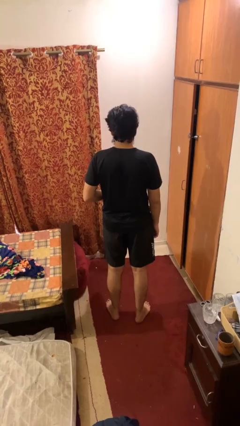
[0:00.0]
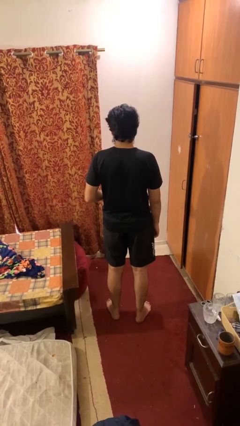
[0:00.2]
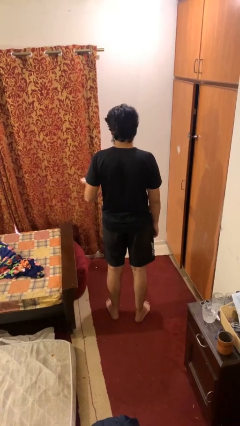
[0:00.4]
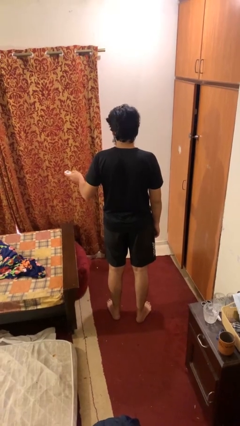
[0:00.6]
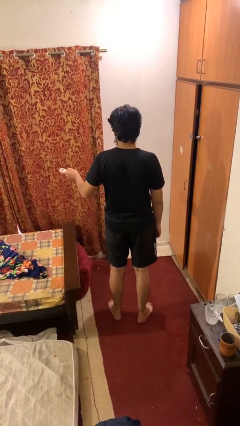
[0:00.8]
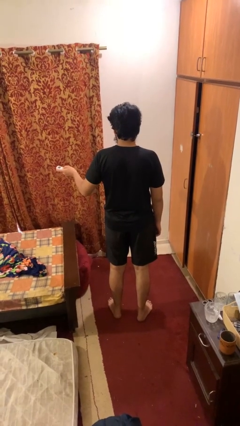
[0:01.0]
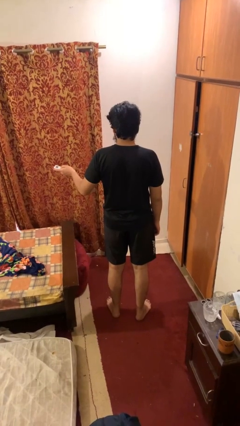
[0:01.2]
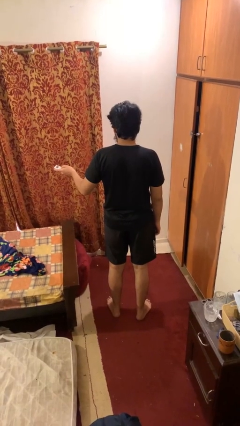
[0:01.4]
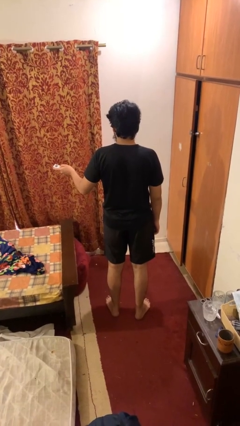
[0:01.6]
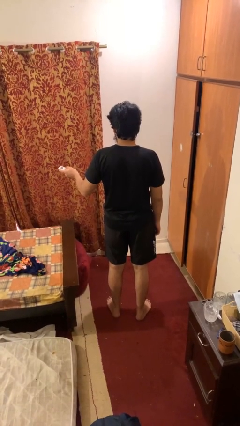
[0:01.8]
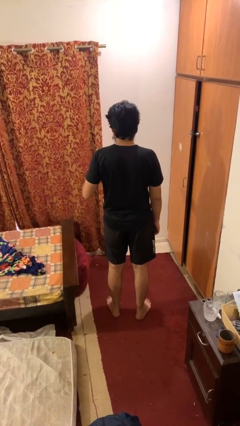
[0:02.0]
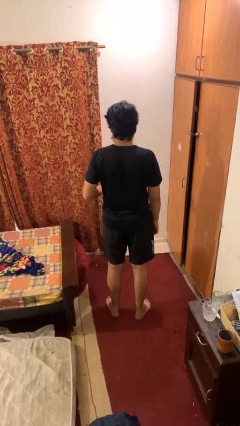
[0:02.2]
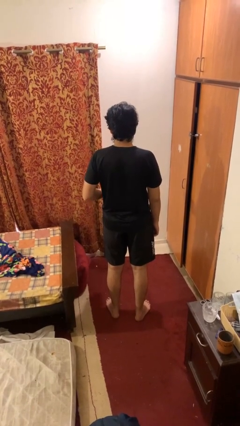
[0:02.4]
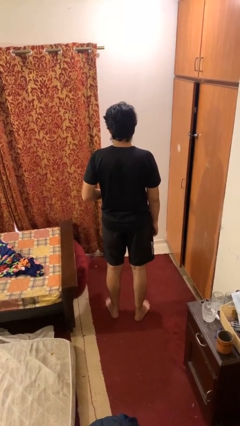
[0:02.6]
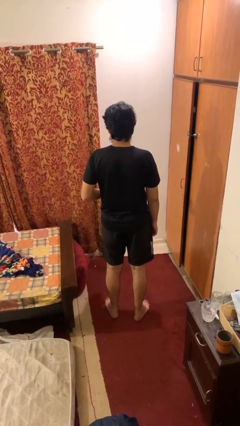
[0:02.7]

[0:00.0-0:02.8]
person uses television remote

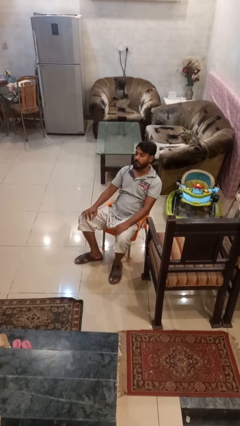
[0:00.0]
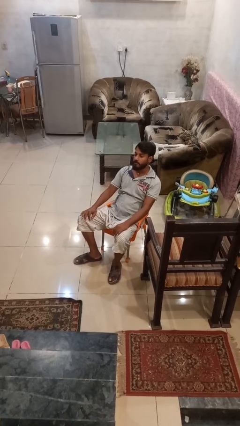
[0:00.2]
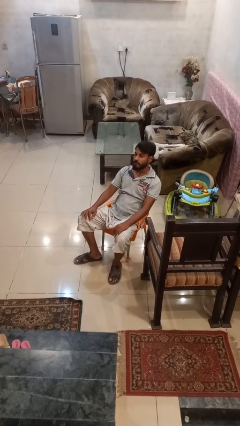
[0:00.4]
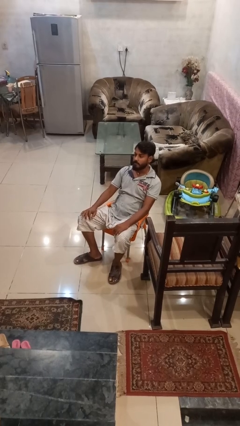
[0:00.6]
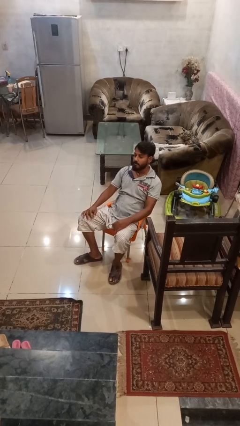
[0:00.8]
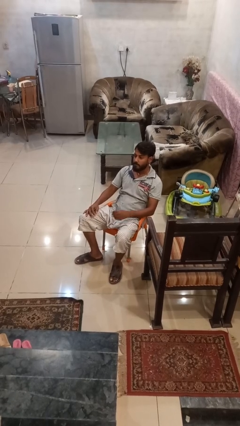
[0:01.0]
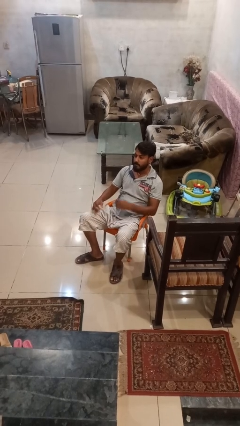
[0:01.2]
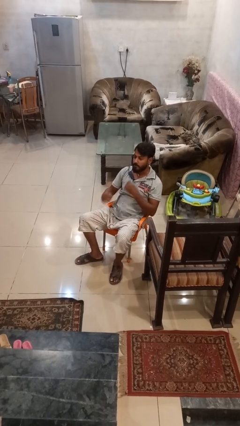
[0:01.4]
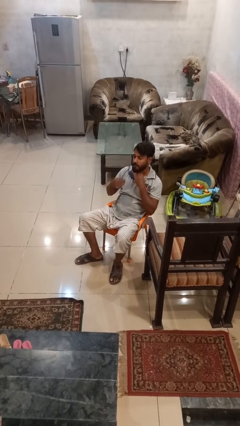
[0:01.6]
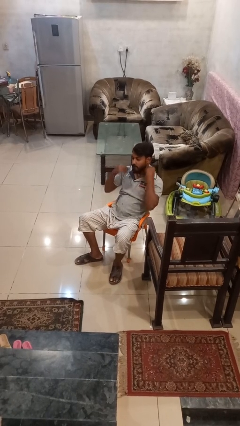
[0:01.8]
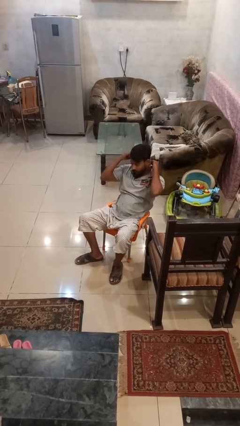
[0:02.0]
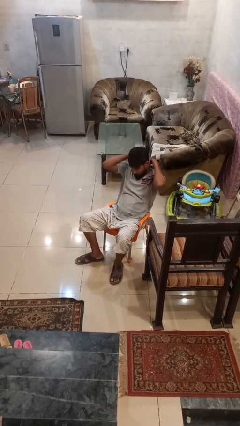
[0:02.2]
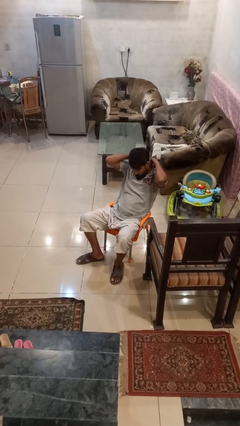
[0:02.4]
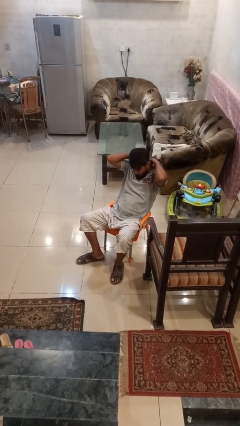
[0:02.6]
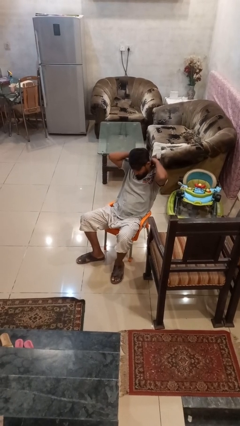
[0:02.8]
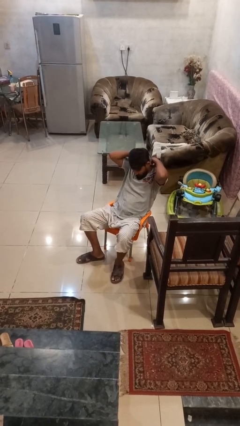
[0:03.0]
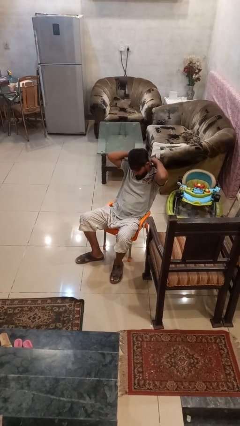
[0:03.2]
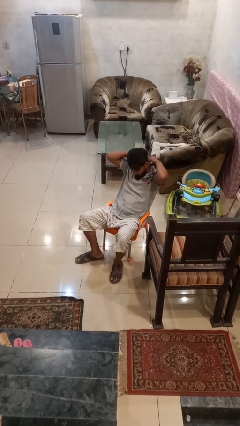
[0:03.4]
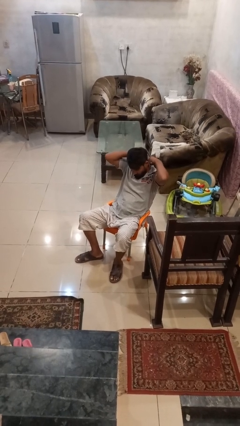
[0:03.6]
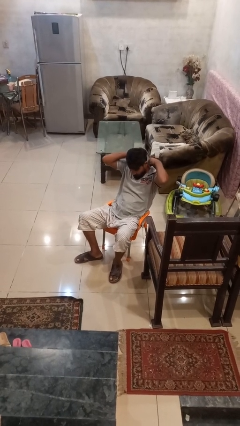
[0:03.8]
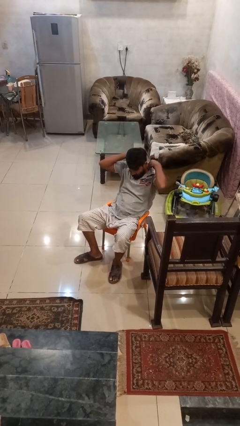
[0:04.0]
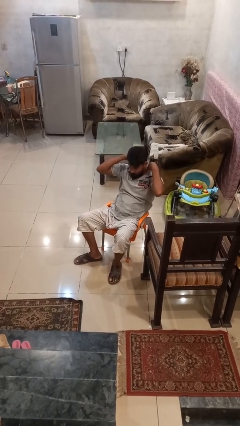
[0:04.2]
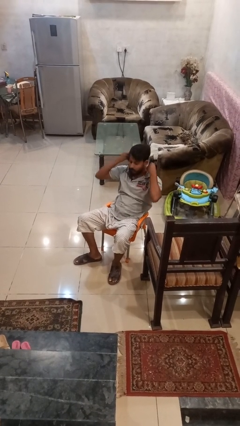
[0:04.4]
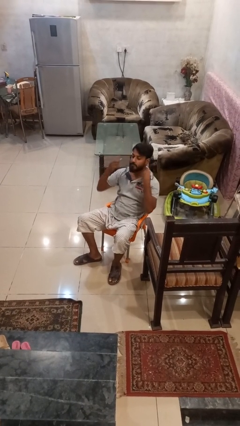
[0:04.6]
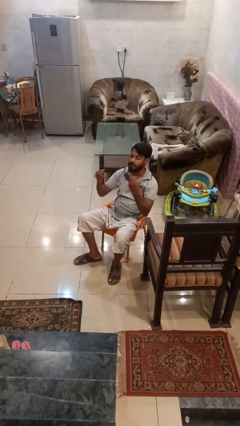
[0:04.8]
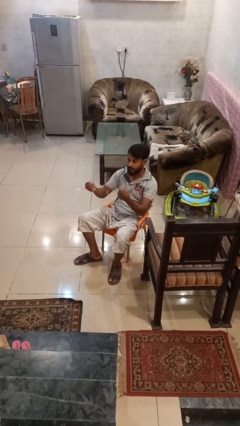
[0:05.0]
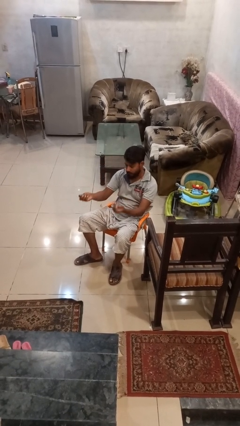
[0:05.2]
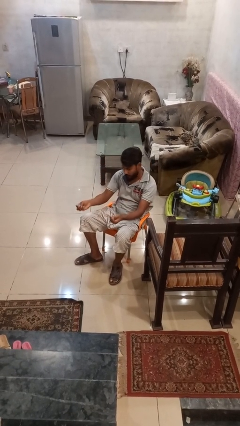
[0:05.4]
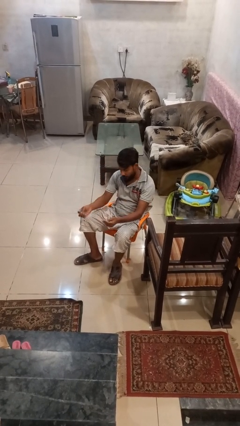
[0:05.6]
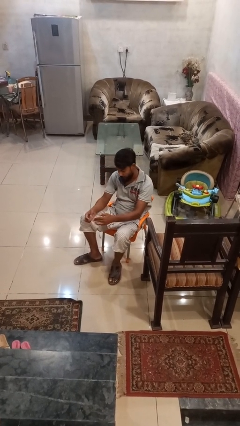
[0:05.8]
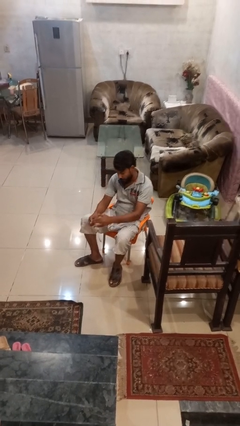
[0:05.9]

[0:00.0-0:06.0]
person takes off necklace

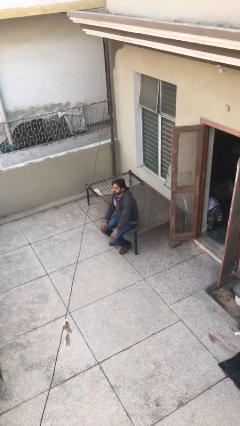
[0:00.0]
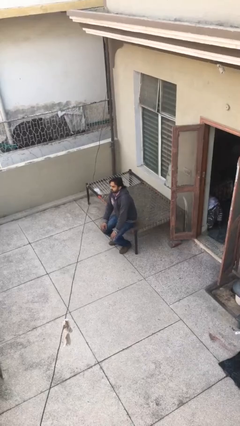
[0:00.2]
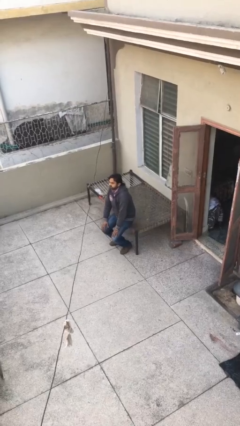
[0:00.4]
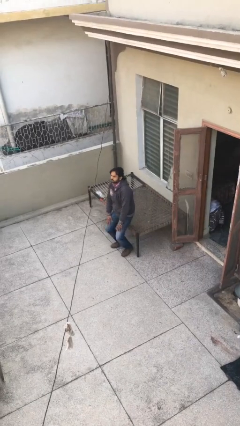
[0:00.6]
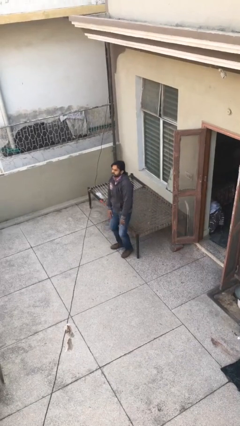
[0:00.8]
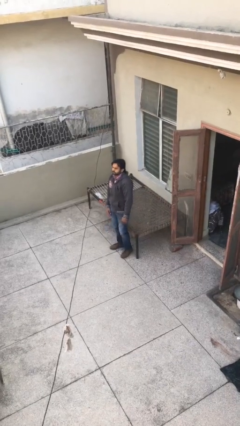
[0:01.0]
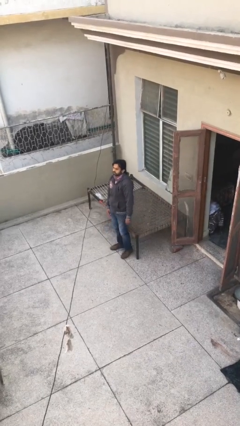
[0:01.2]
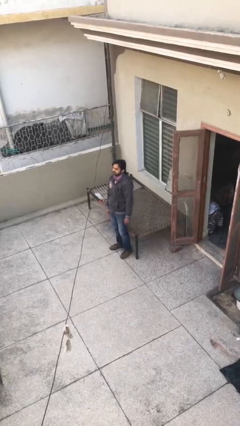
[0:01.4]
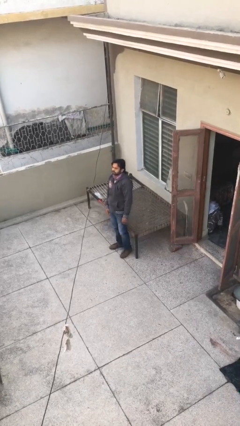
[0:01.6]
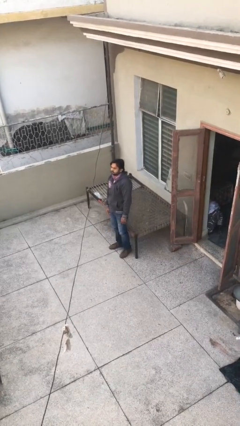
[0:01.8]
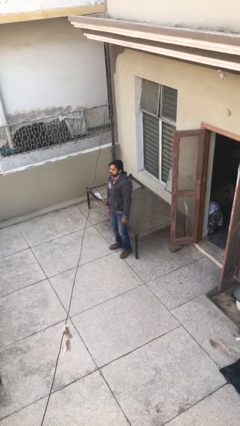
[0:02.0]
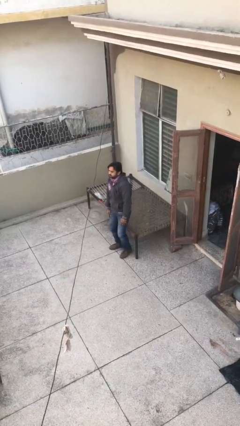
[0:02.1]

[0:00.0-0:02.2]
person stands up

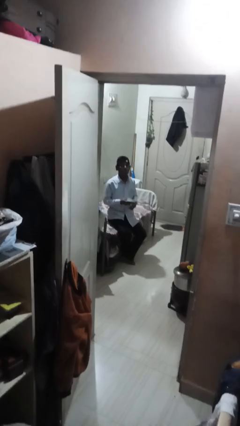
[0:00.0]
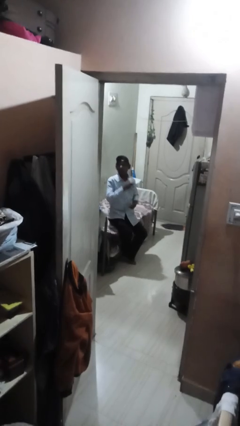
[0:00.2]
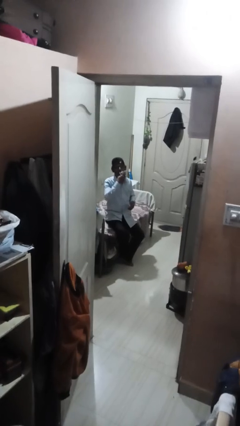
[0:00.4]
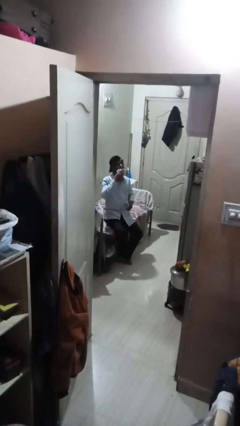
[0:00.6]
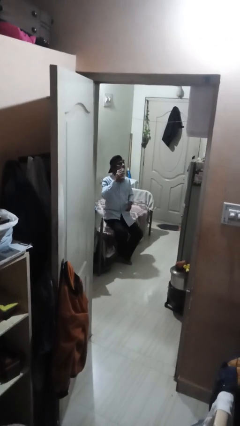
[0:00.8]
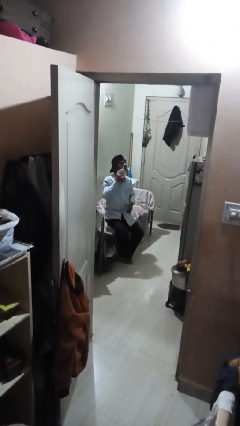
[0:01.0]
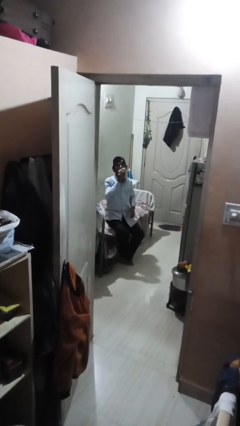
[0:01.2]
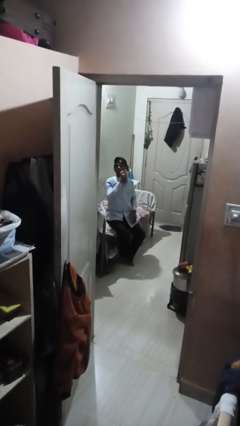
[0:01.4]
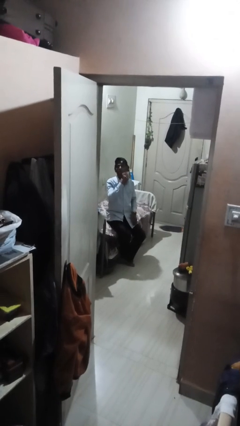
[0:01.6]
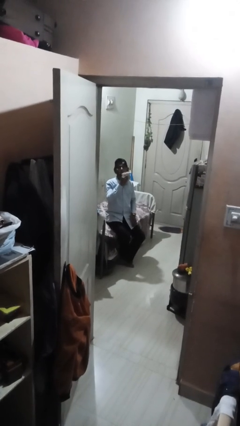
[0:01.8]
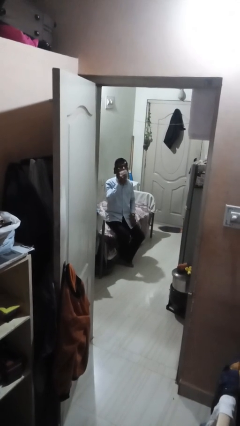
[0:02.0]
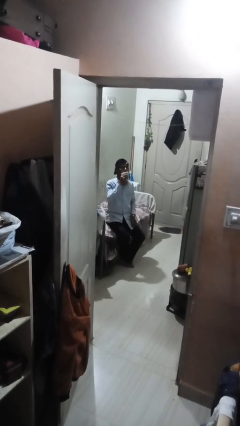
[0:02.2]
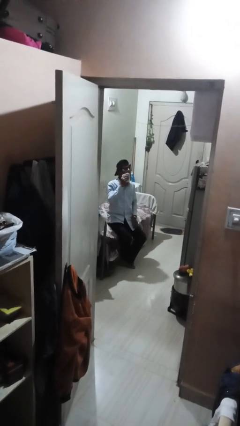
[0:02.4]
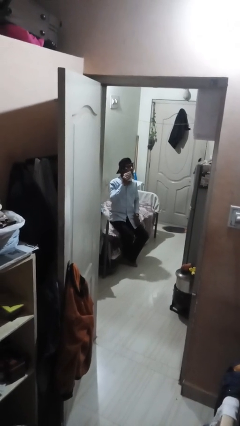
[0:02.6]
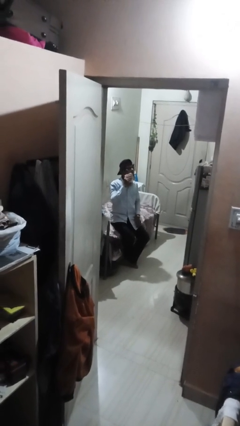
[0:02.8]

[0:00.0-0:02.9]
person wipes mouth with napkin

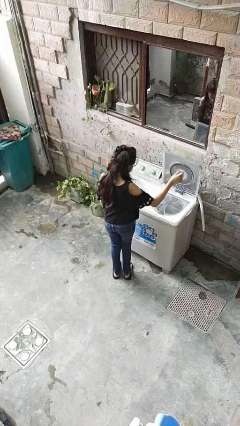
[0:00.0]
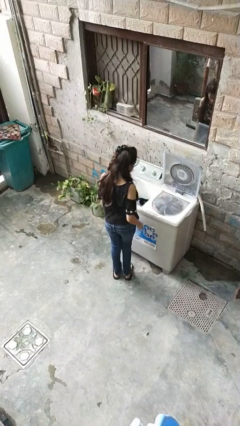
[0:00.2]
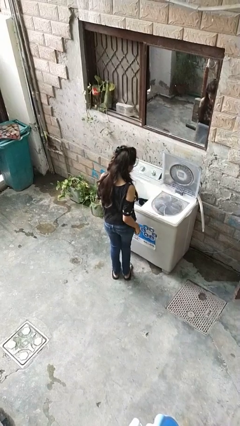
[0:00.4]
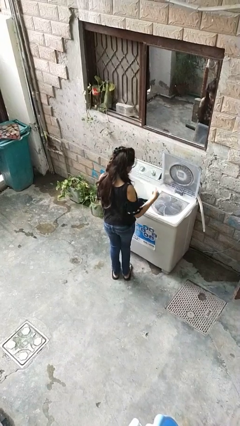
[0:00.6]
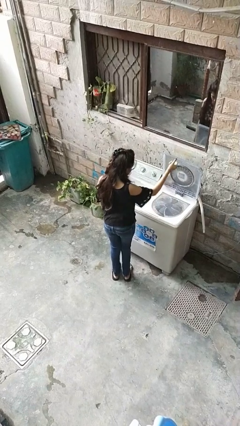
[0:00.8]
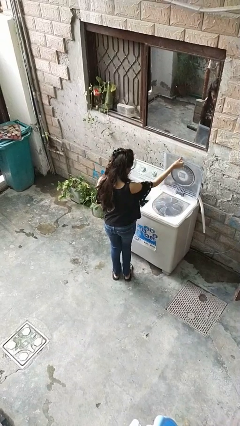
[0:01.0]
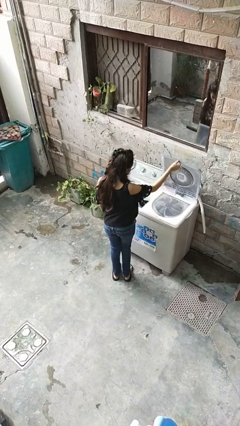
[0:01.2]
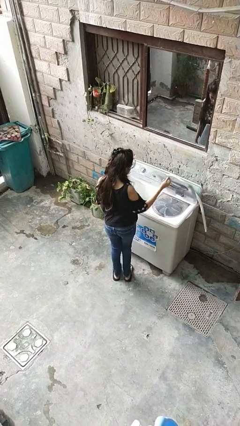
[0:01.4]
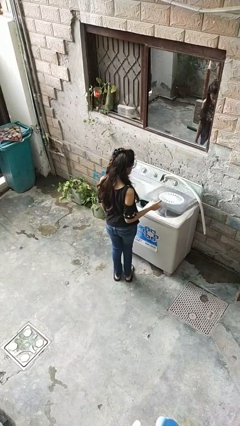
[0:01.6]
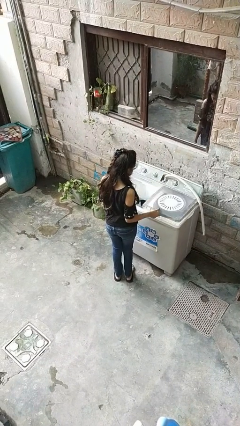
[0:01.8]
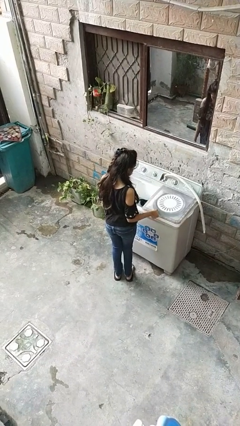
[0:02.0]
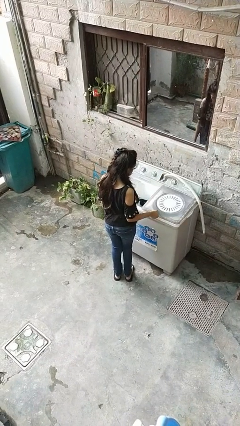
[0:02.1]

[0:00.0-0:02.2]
person closes clothes washer

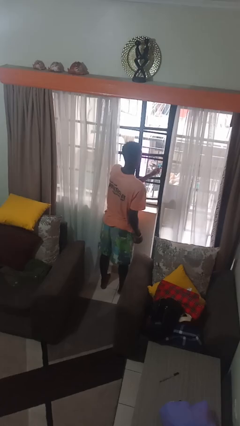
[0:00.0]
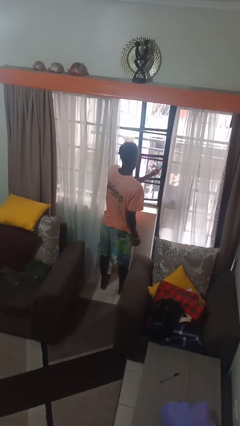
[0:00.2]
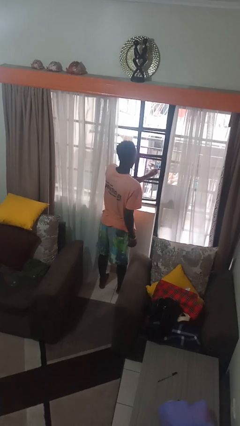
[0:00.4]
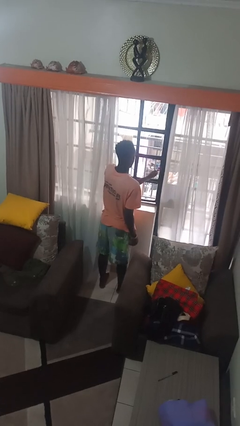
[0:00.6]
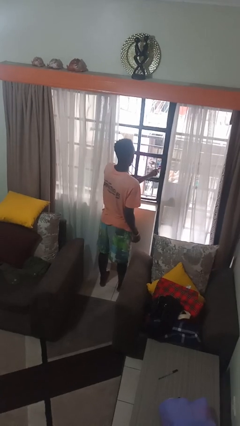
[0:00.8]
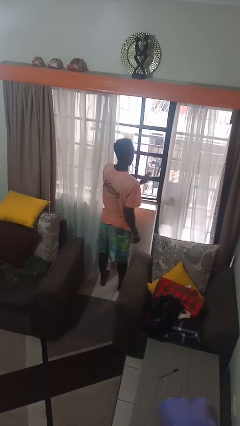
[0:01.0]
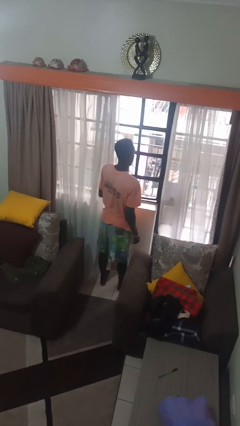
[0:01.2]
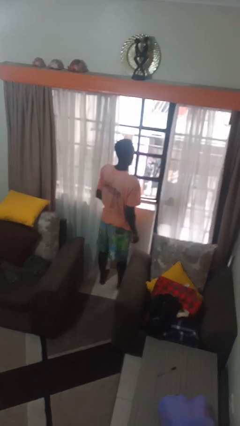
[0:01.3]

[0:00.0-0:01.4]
person closes home window

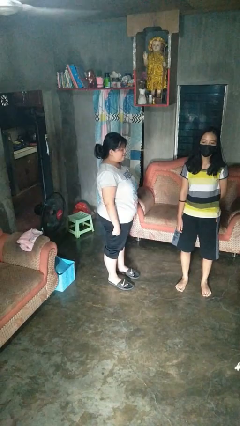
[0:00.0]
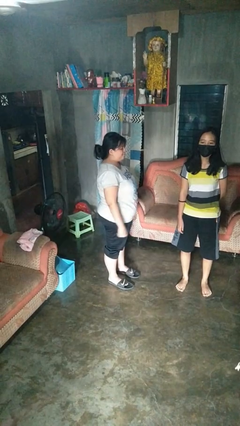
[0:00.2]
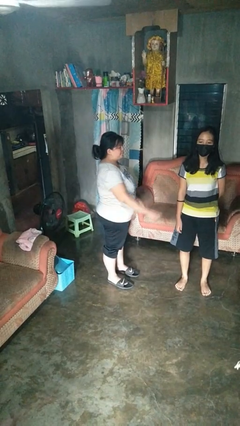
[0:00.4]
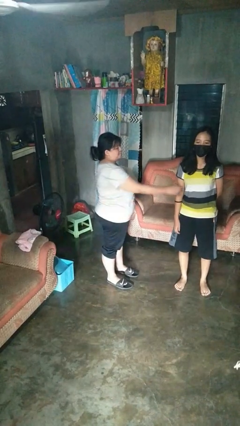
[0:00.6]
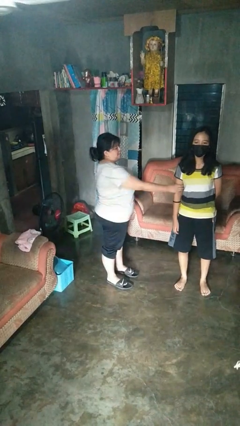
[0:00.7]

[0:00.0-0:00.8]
person grabs person by bicep
